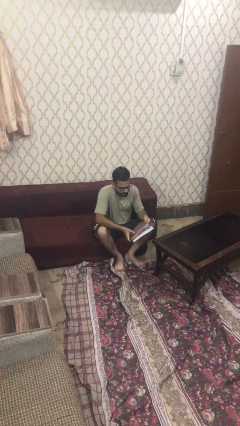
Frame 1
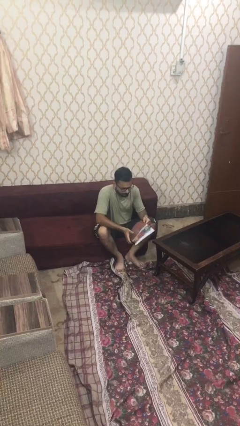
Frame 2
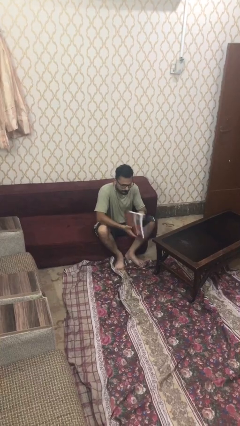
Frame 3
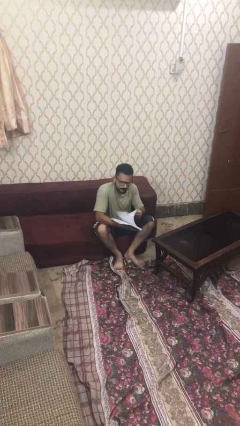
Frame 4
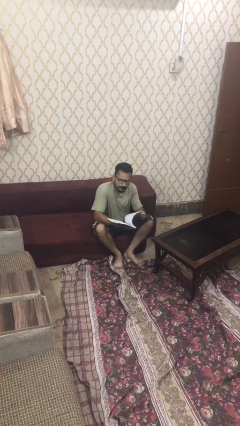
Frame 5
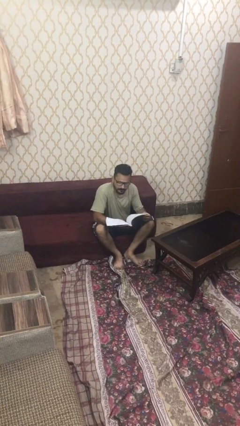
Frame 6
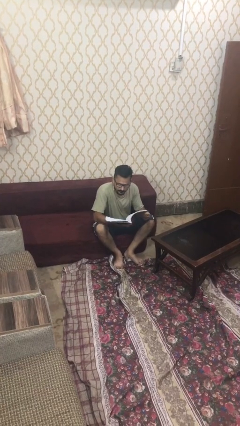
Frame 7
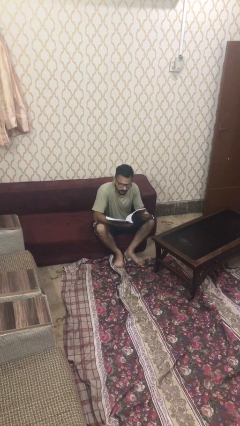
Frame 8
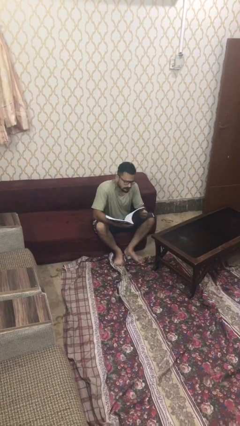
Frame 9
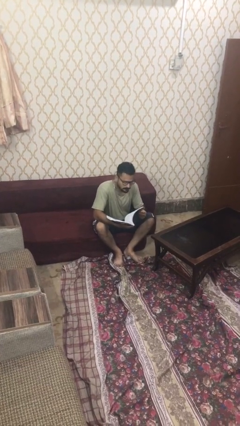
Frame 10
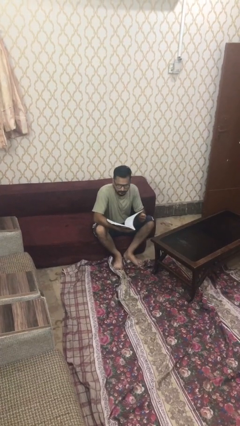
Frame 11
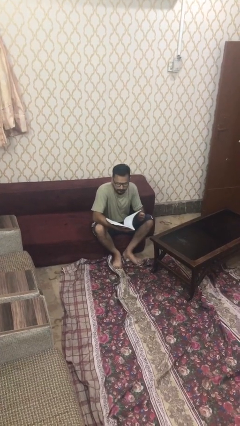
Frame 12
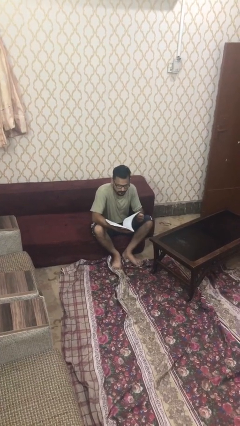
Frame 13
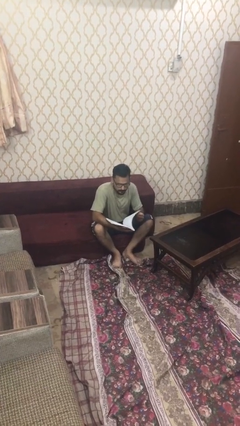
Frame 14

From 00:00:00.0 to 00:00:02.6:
person reads document

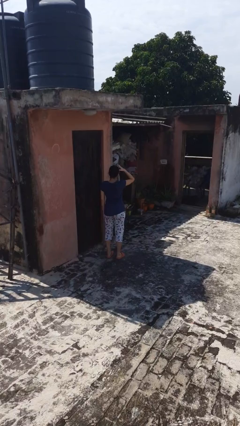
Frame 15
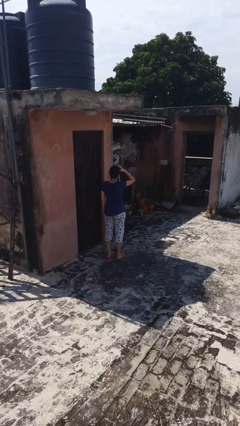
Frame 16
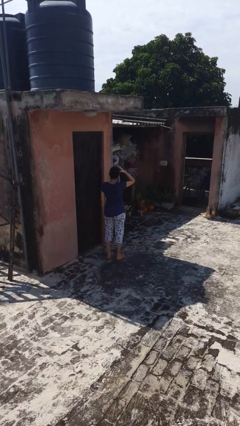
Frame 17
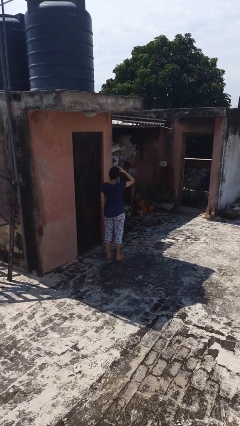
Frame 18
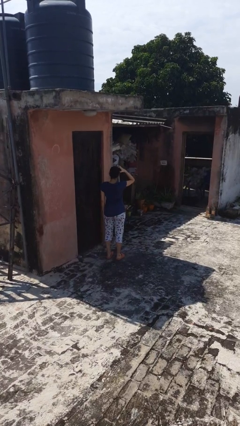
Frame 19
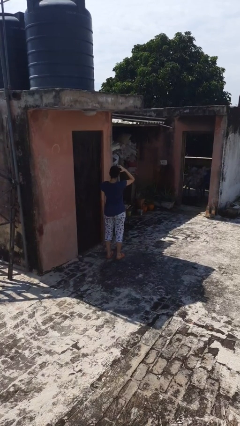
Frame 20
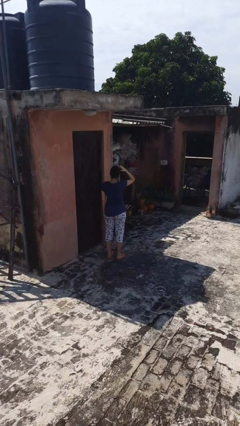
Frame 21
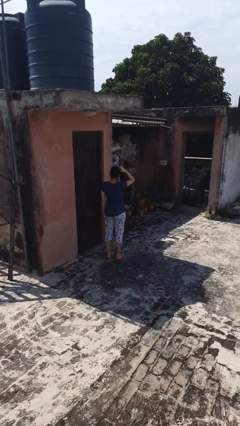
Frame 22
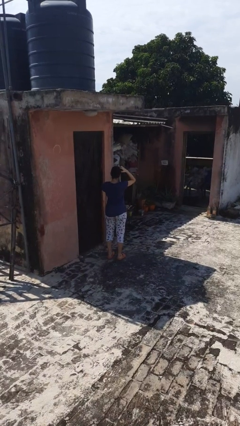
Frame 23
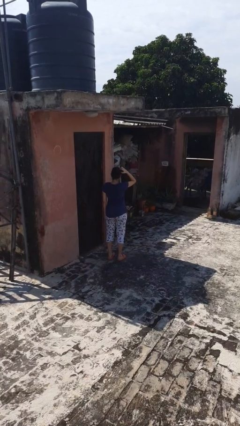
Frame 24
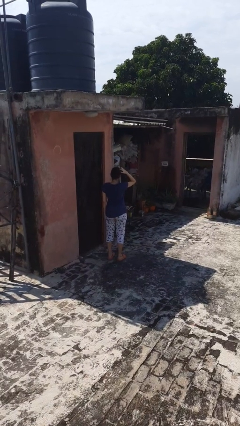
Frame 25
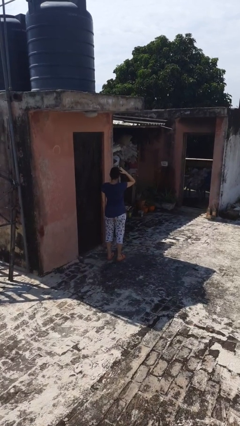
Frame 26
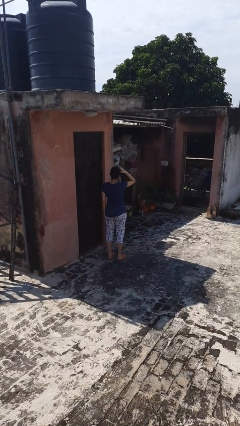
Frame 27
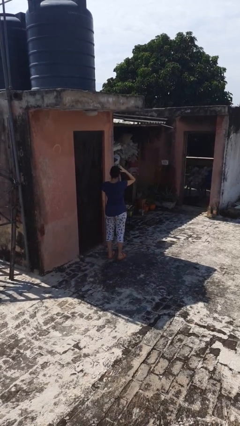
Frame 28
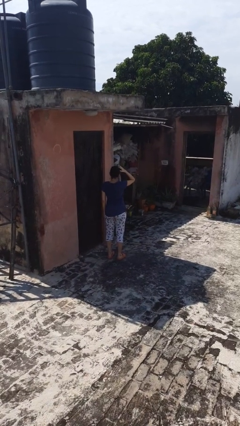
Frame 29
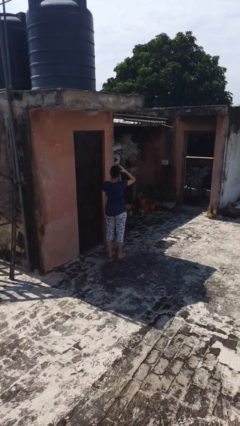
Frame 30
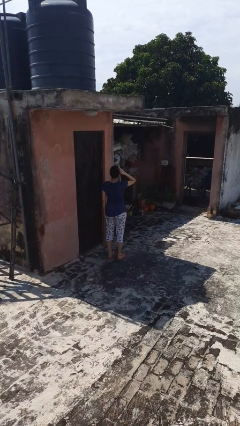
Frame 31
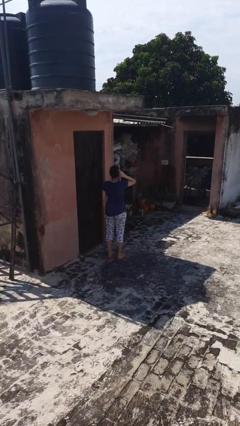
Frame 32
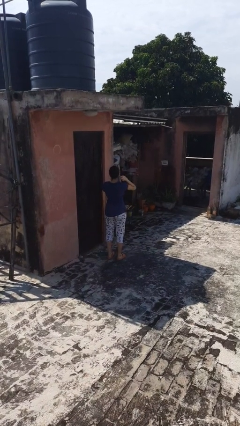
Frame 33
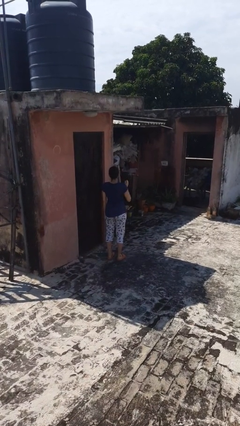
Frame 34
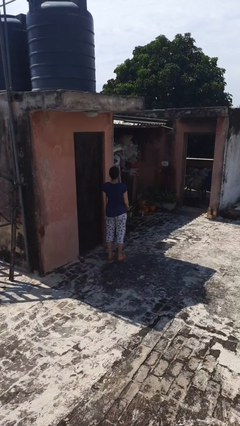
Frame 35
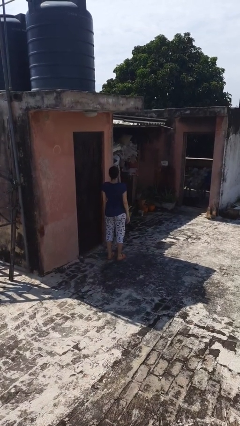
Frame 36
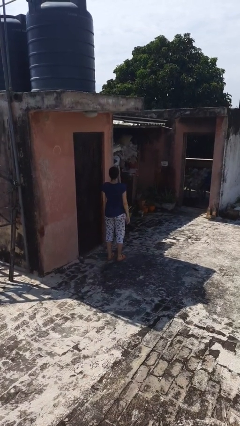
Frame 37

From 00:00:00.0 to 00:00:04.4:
person scratches face

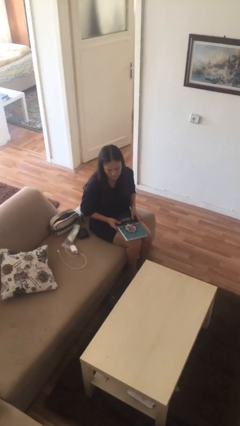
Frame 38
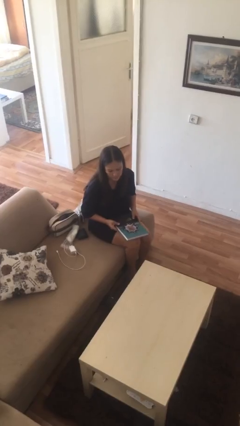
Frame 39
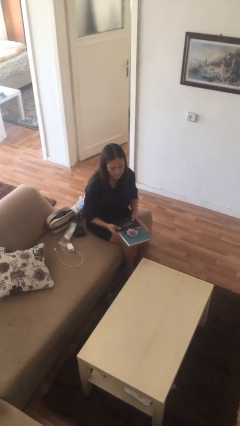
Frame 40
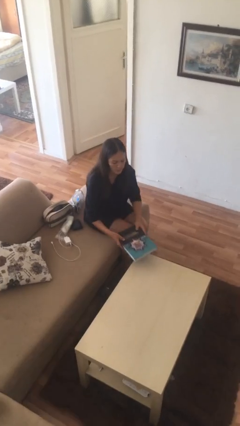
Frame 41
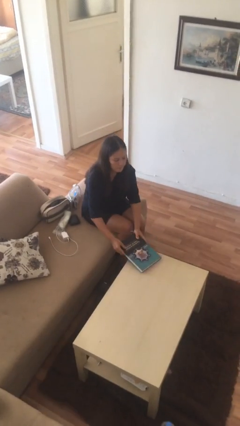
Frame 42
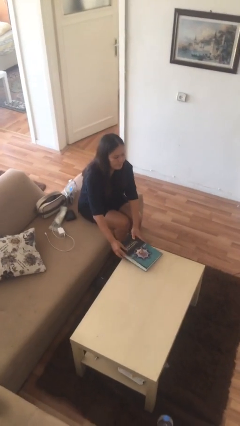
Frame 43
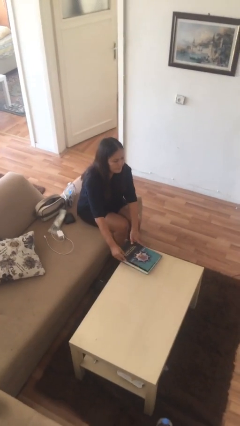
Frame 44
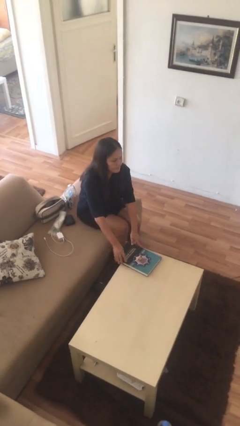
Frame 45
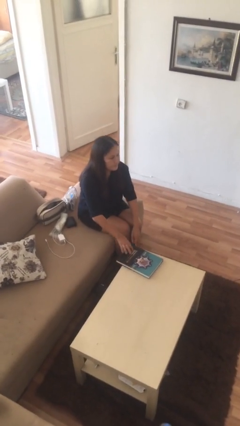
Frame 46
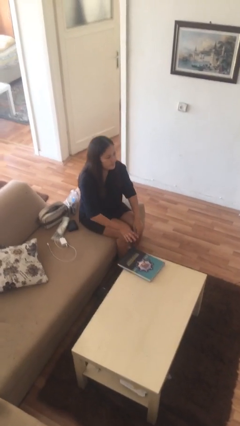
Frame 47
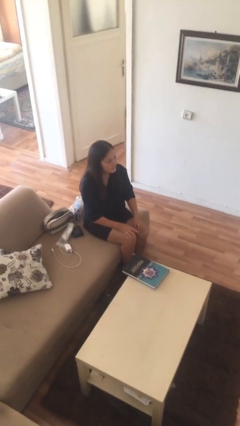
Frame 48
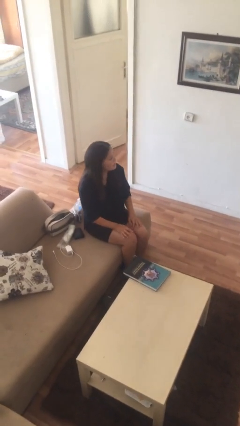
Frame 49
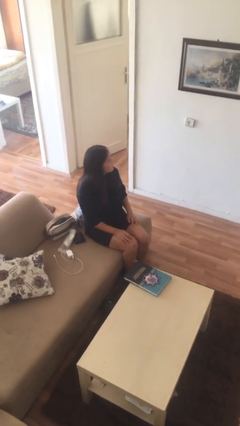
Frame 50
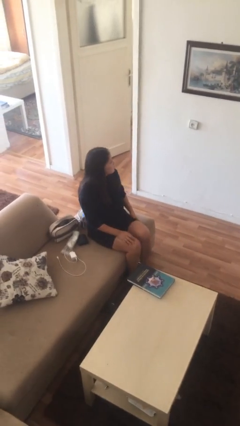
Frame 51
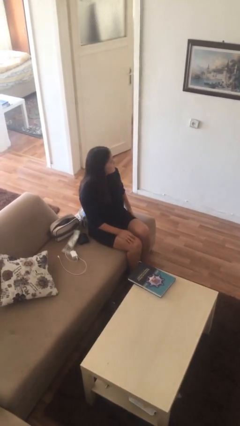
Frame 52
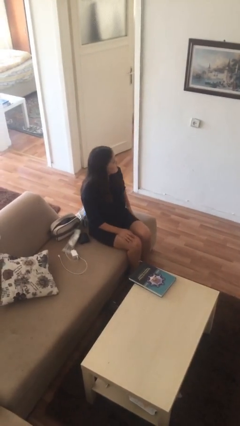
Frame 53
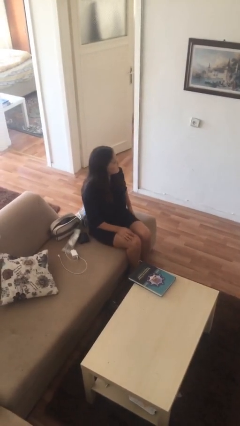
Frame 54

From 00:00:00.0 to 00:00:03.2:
person puts down object on table

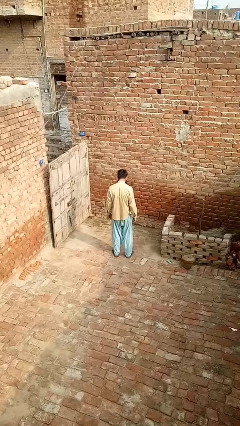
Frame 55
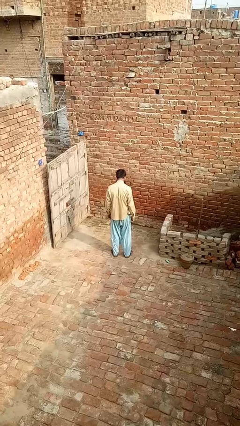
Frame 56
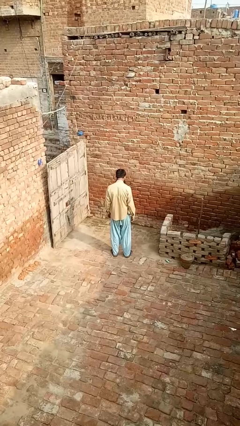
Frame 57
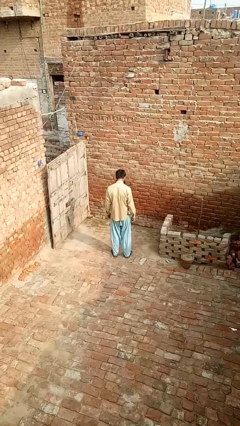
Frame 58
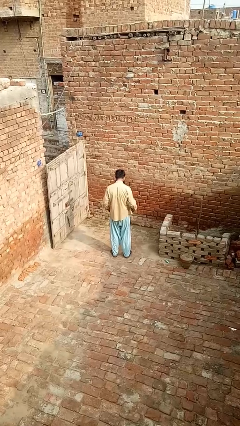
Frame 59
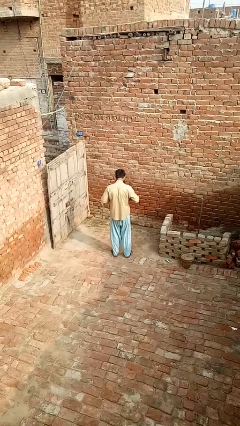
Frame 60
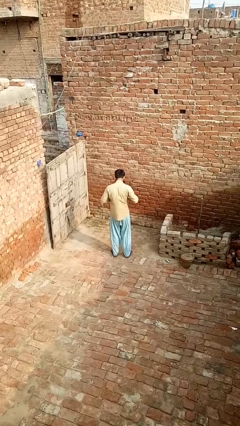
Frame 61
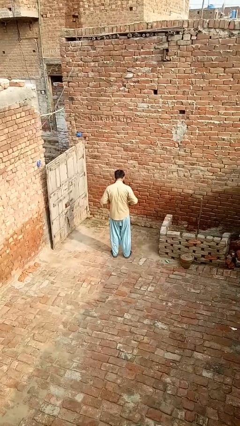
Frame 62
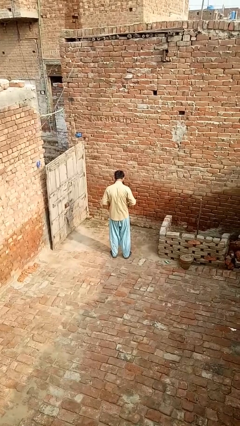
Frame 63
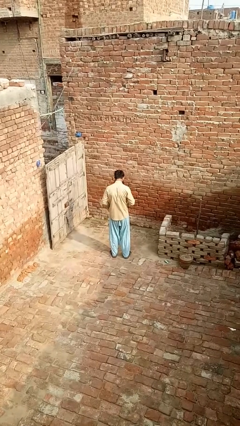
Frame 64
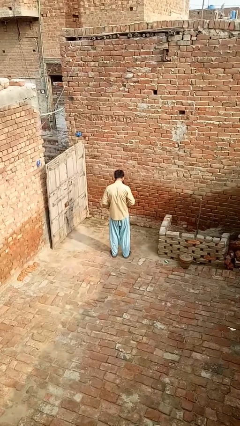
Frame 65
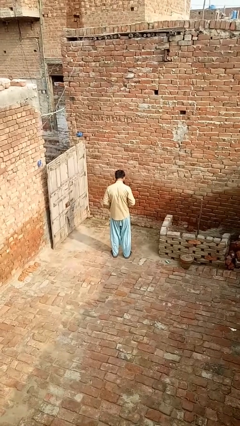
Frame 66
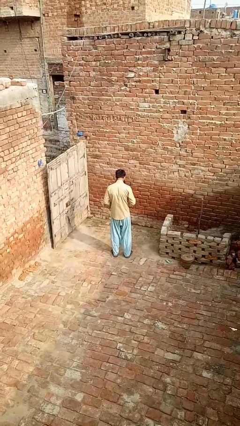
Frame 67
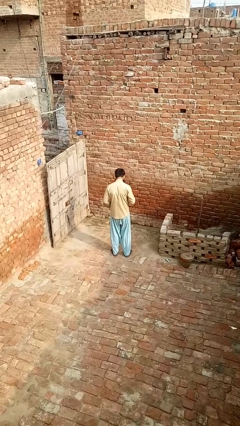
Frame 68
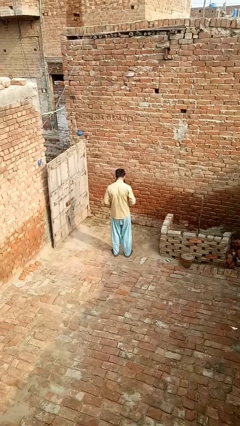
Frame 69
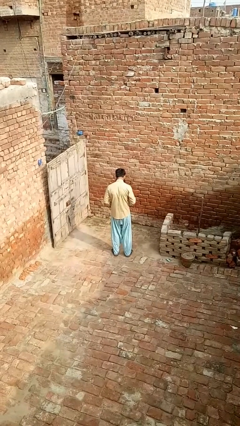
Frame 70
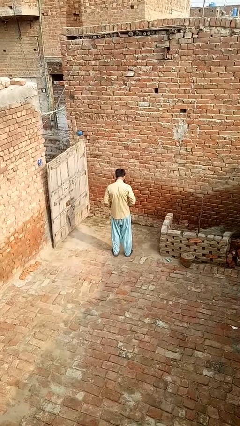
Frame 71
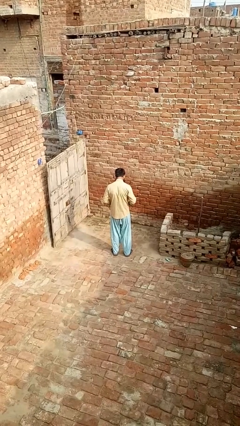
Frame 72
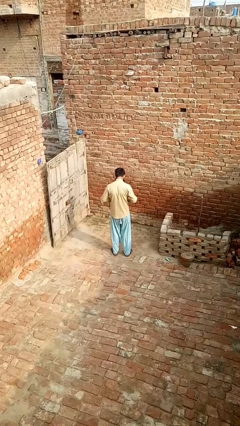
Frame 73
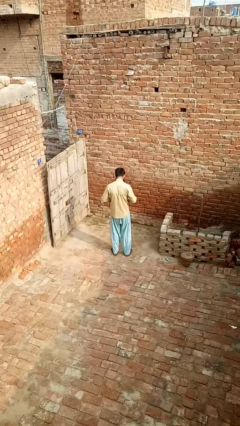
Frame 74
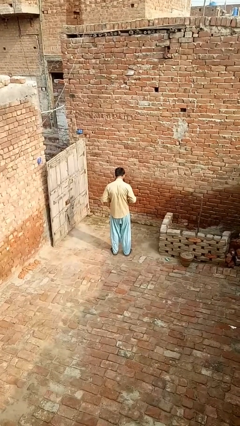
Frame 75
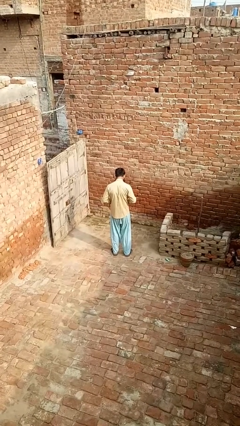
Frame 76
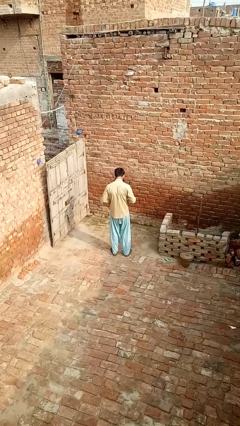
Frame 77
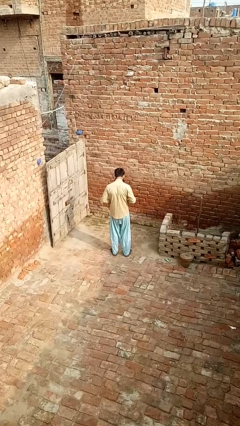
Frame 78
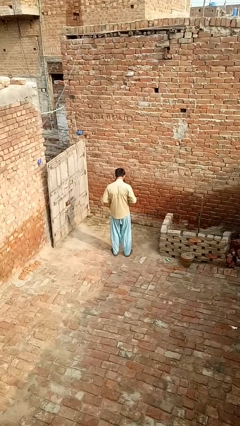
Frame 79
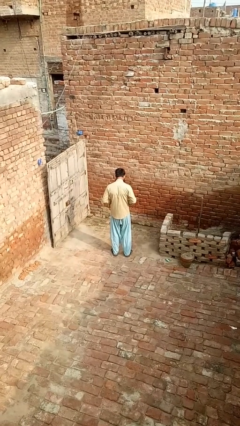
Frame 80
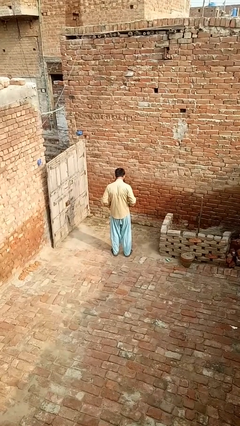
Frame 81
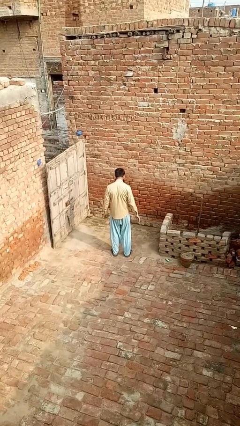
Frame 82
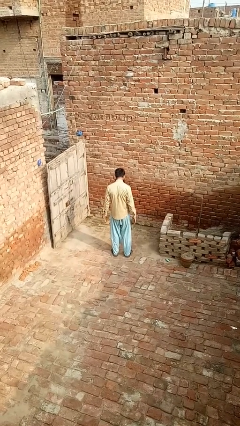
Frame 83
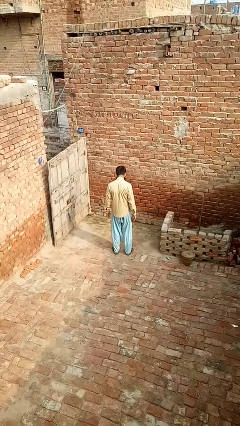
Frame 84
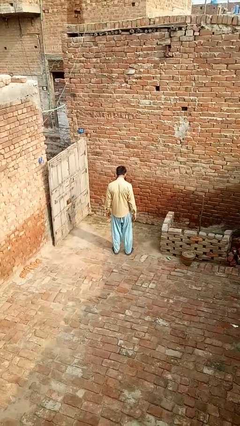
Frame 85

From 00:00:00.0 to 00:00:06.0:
person buttons shirt

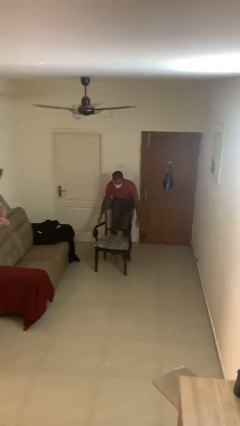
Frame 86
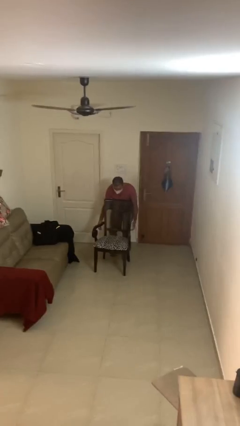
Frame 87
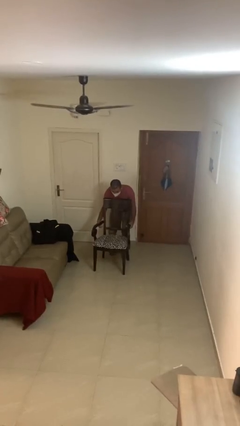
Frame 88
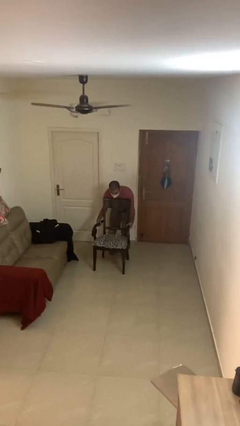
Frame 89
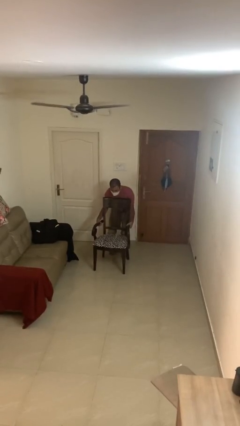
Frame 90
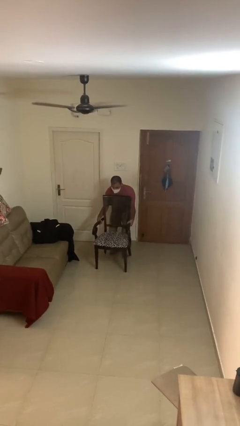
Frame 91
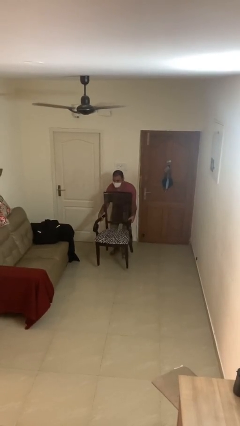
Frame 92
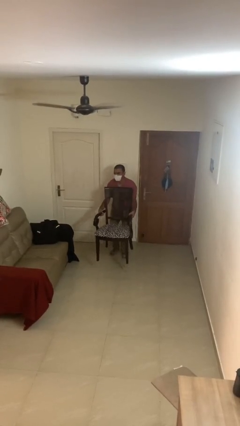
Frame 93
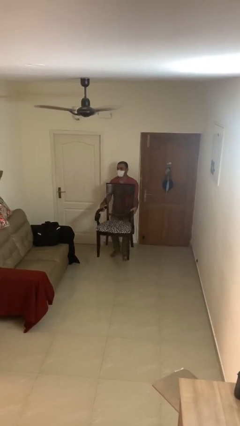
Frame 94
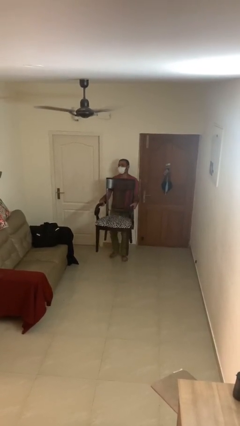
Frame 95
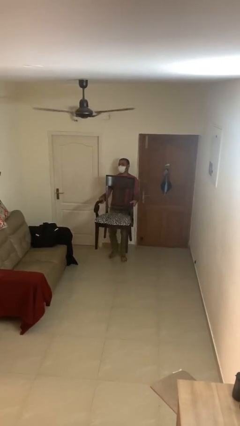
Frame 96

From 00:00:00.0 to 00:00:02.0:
person picks up object from floor
